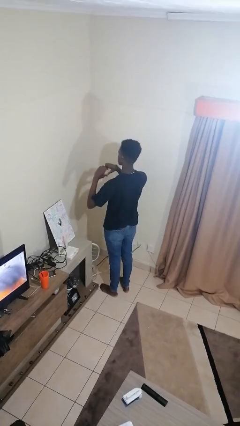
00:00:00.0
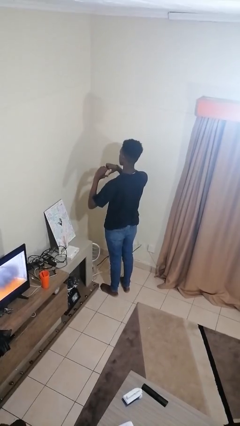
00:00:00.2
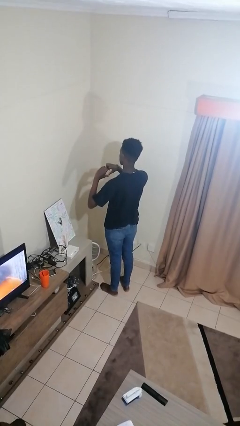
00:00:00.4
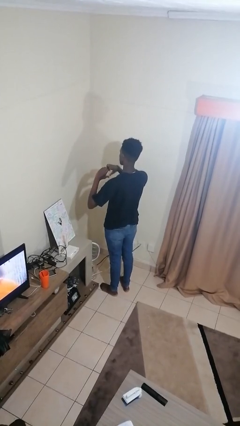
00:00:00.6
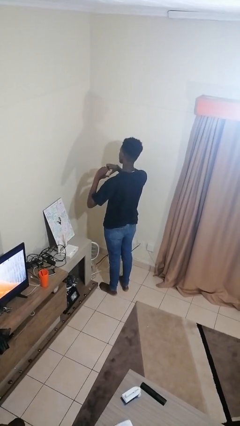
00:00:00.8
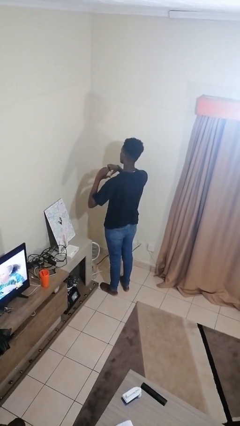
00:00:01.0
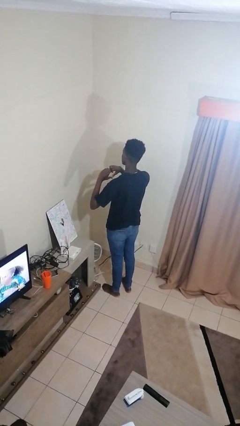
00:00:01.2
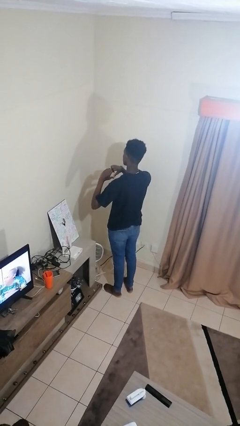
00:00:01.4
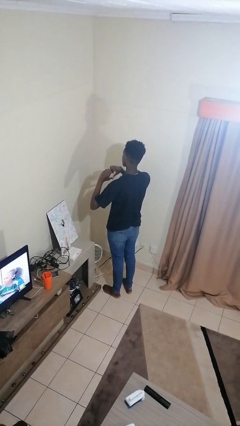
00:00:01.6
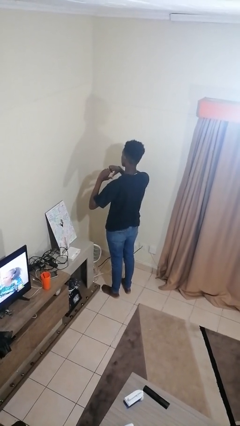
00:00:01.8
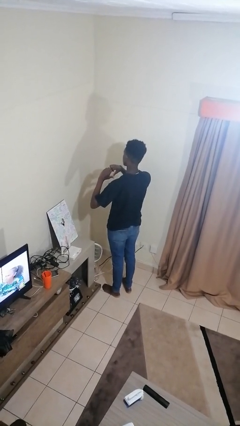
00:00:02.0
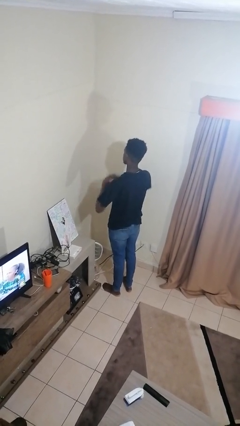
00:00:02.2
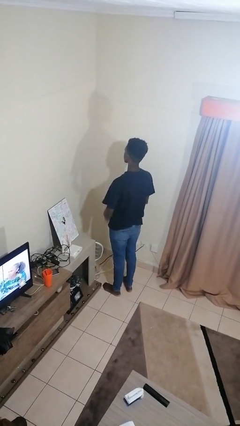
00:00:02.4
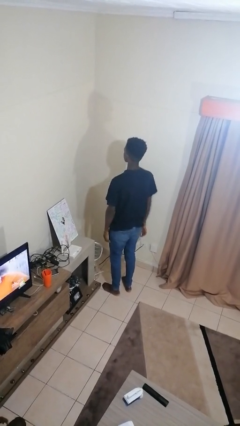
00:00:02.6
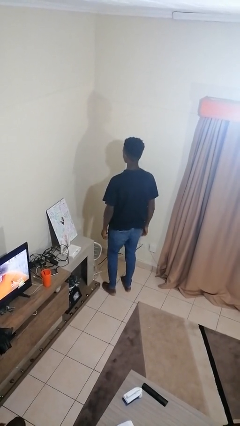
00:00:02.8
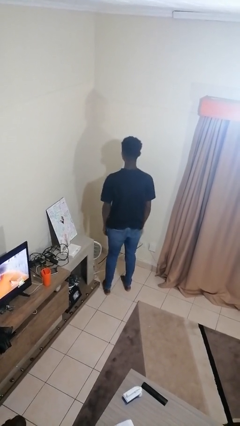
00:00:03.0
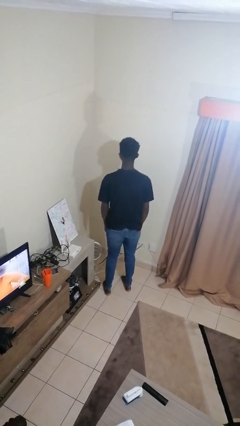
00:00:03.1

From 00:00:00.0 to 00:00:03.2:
person gestures heart

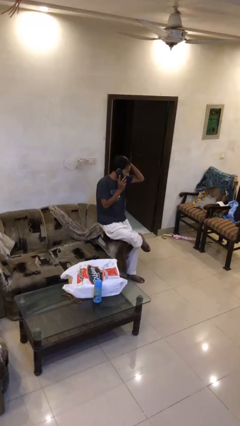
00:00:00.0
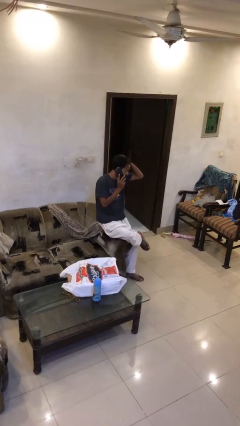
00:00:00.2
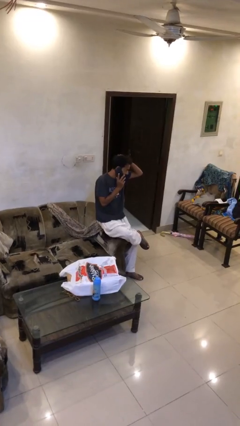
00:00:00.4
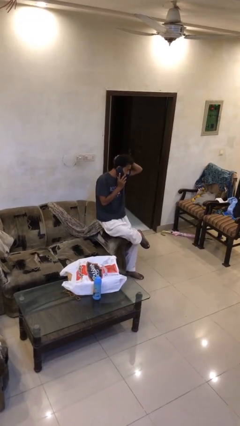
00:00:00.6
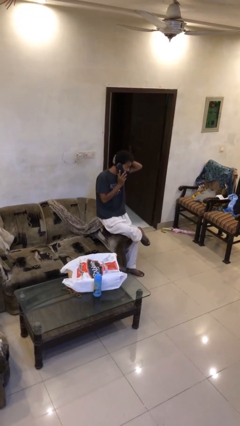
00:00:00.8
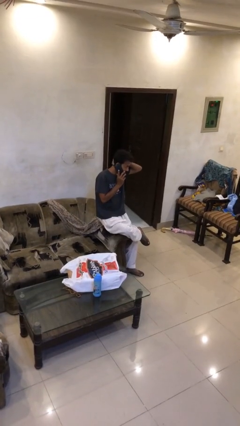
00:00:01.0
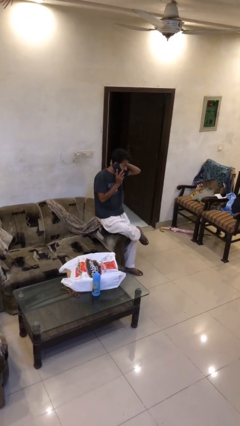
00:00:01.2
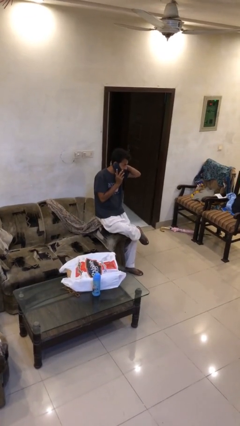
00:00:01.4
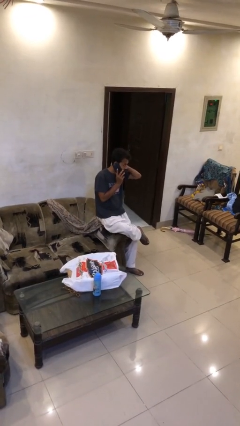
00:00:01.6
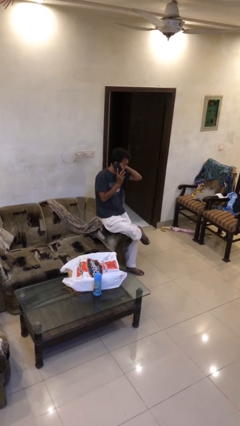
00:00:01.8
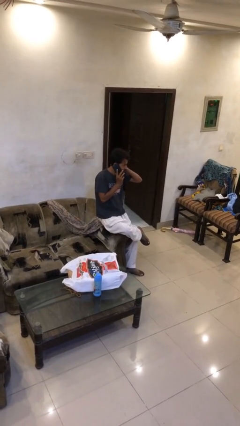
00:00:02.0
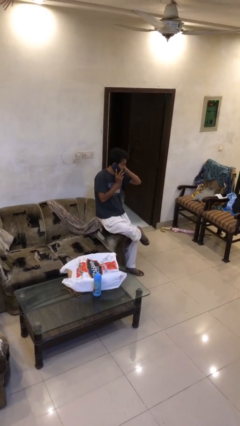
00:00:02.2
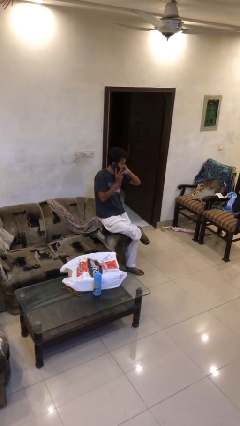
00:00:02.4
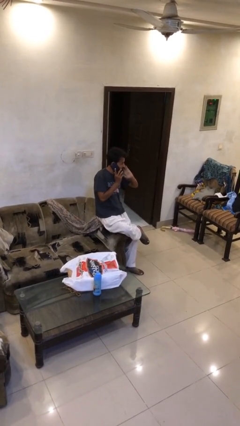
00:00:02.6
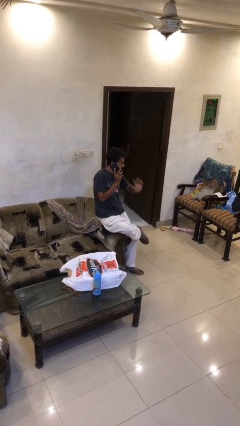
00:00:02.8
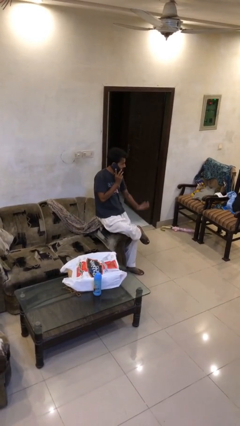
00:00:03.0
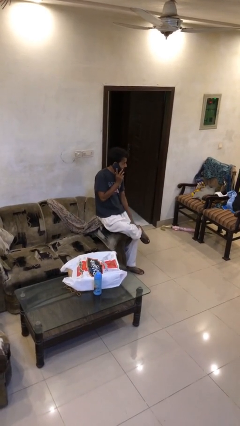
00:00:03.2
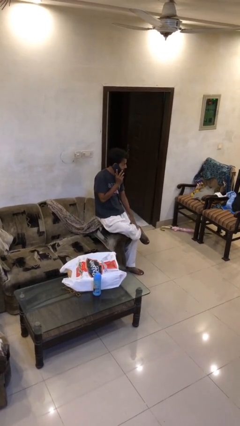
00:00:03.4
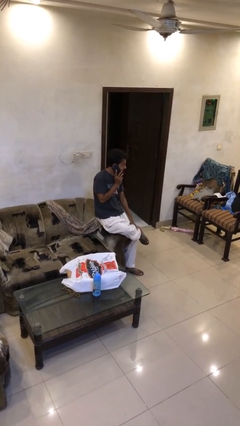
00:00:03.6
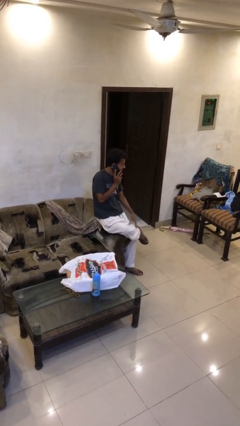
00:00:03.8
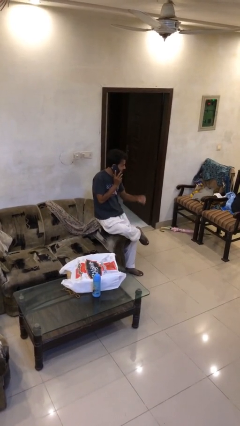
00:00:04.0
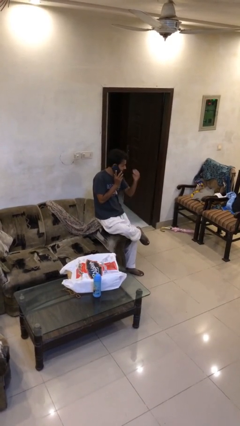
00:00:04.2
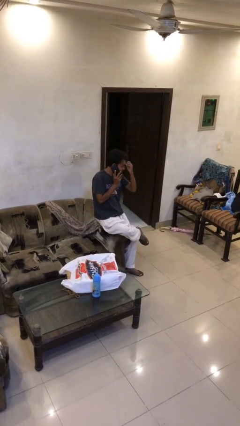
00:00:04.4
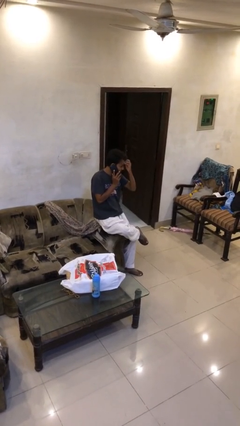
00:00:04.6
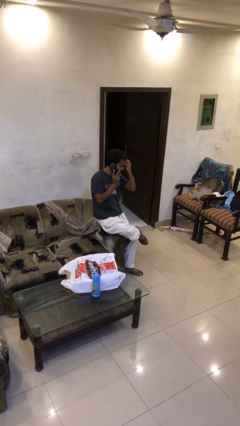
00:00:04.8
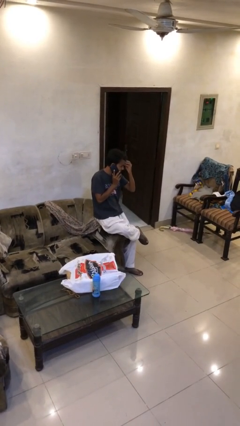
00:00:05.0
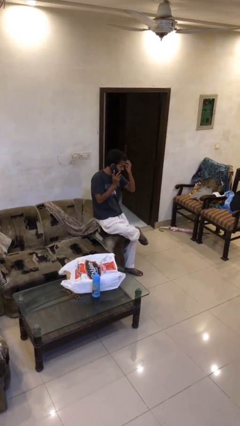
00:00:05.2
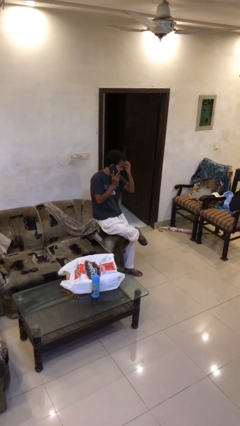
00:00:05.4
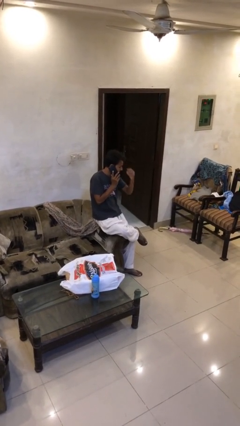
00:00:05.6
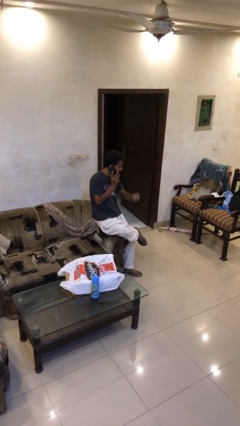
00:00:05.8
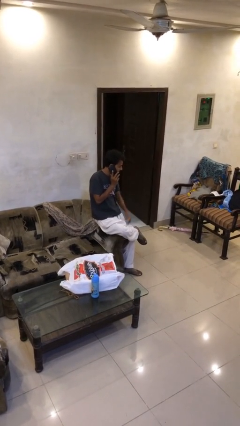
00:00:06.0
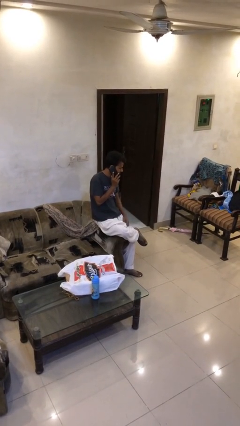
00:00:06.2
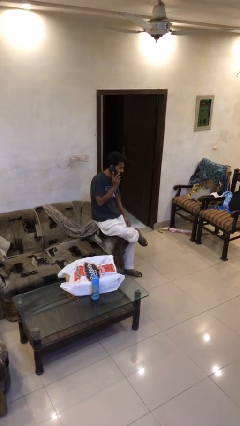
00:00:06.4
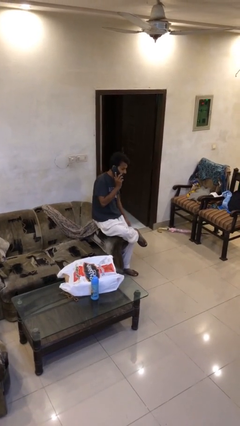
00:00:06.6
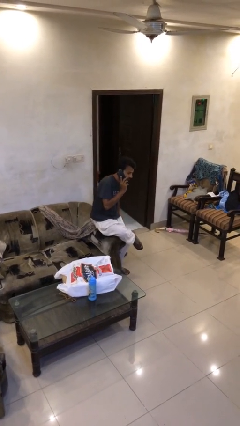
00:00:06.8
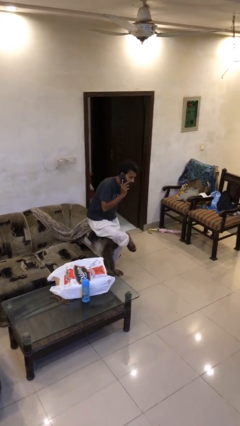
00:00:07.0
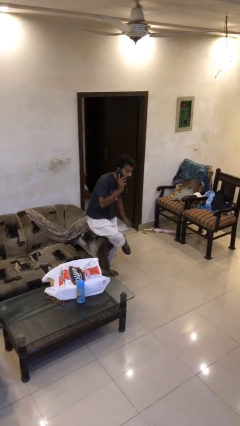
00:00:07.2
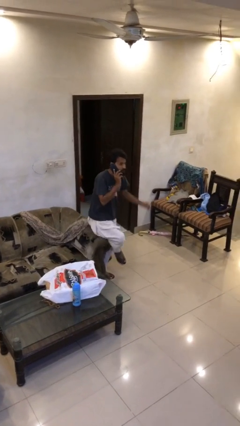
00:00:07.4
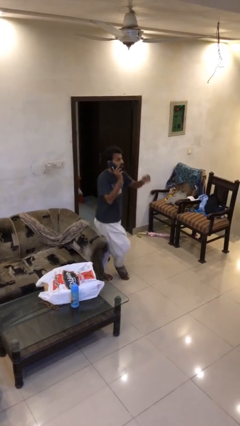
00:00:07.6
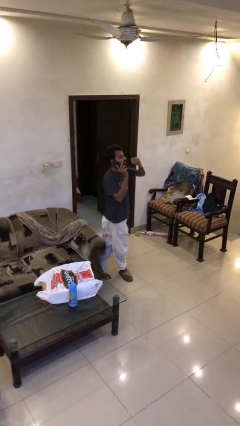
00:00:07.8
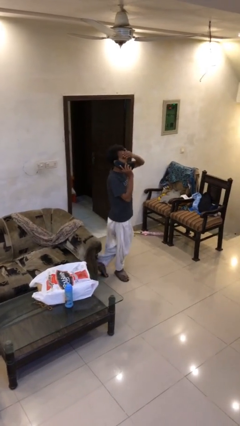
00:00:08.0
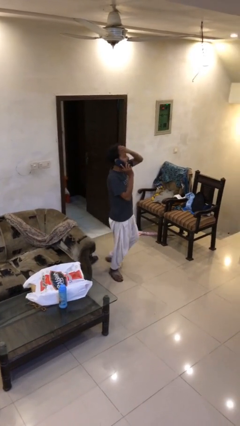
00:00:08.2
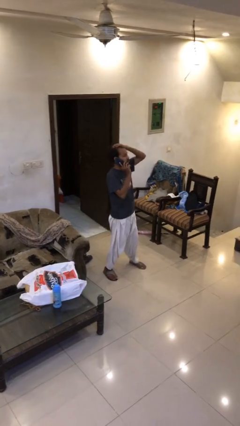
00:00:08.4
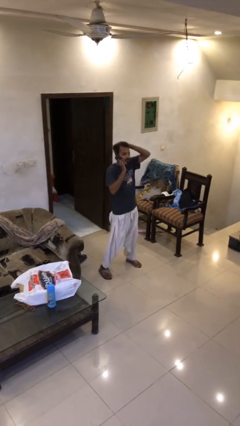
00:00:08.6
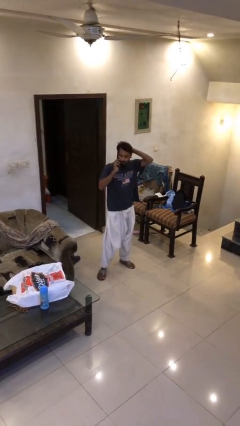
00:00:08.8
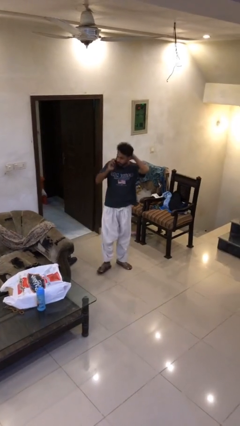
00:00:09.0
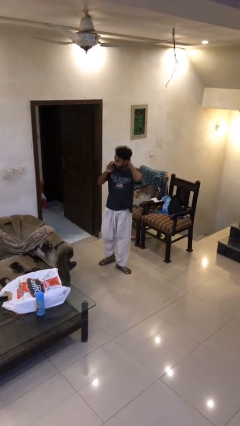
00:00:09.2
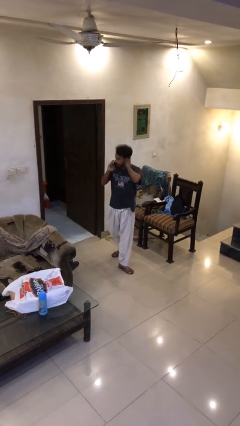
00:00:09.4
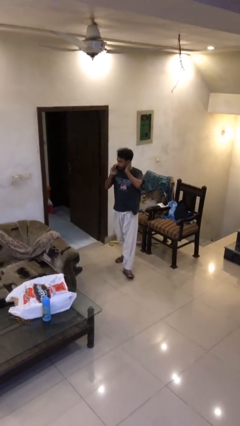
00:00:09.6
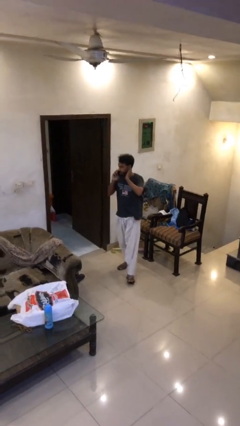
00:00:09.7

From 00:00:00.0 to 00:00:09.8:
person talks on phone

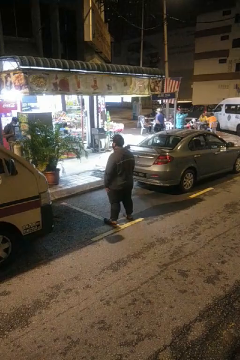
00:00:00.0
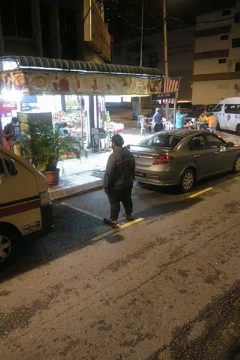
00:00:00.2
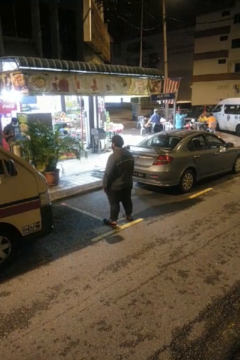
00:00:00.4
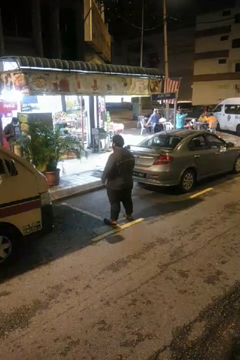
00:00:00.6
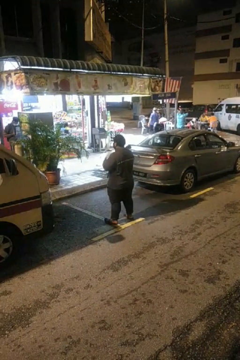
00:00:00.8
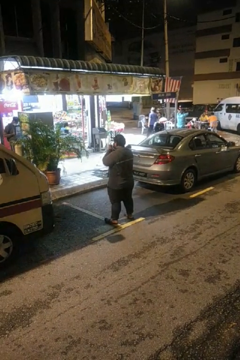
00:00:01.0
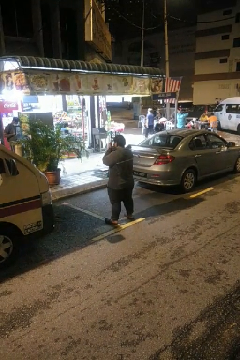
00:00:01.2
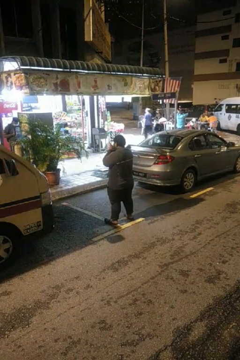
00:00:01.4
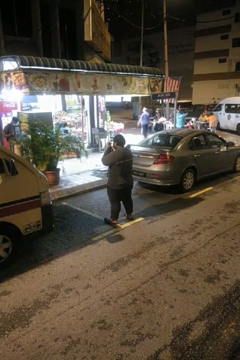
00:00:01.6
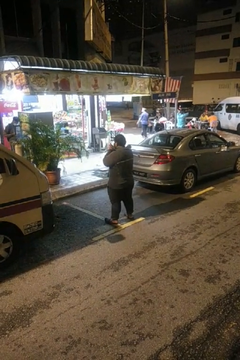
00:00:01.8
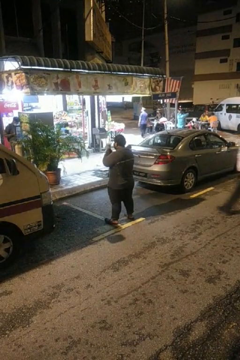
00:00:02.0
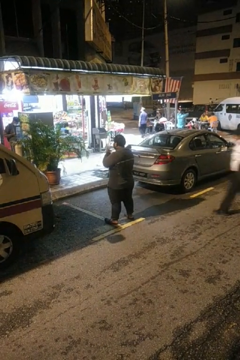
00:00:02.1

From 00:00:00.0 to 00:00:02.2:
person blows into hands

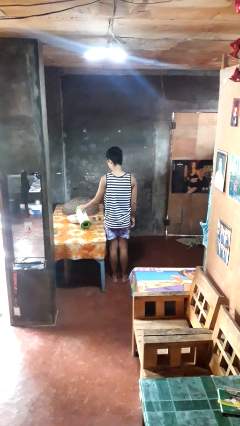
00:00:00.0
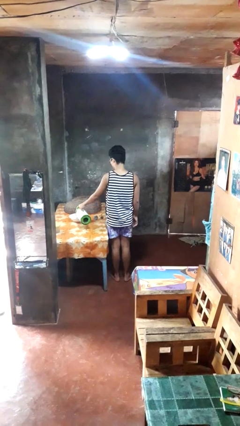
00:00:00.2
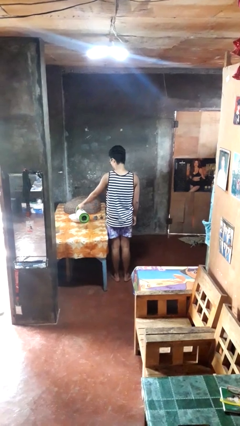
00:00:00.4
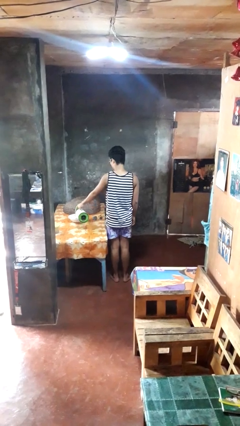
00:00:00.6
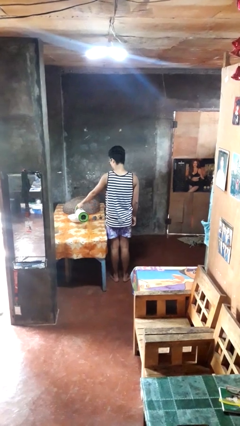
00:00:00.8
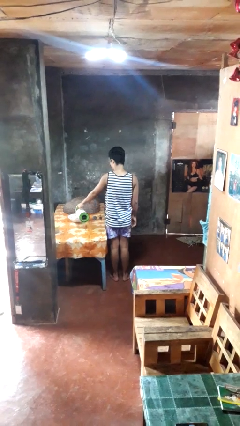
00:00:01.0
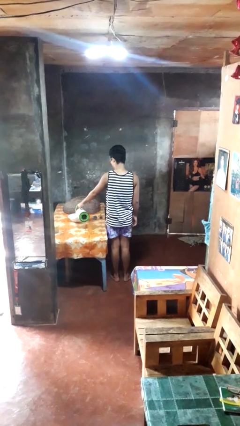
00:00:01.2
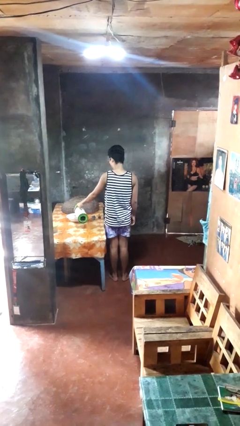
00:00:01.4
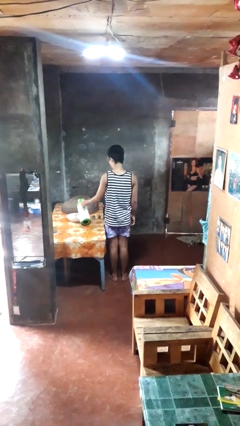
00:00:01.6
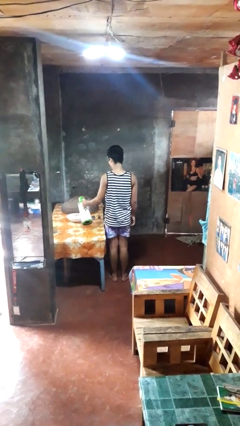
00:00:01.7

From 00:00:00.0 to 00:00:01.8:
person pours into bowl

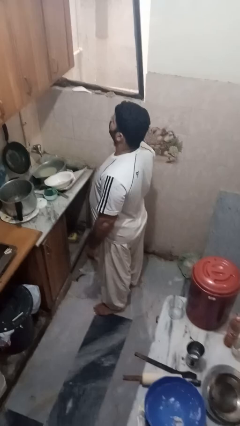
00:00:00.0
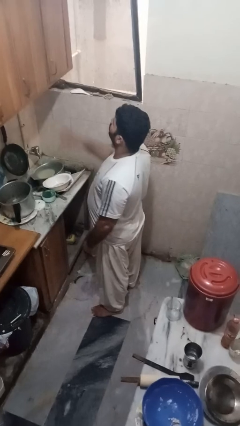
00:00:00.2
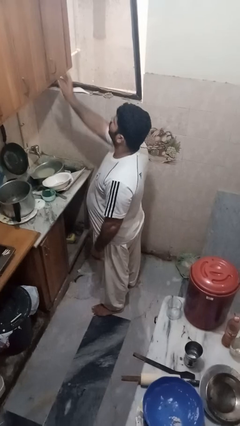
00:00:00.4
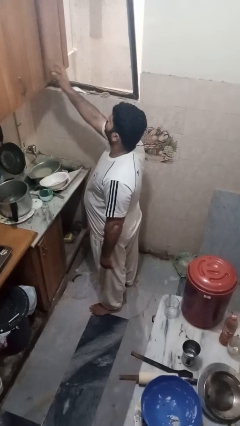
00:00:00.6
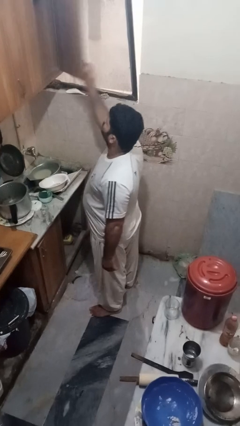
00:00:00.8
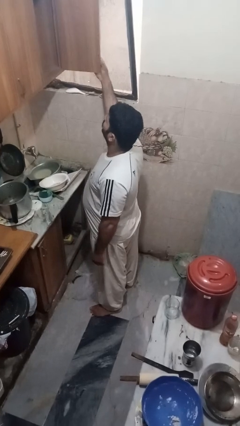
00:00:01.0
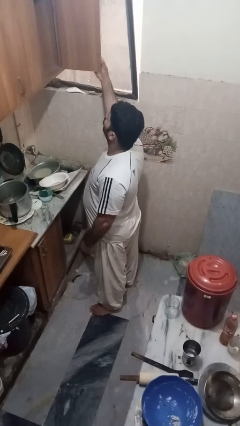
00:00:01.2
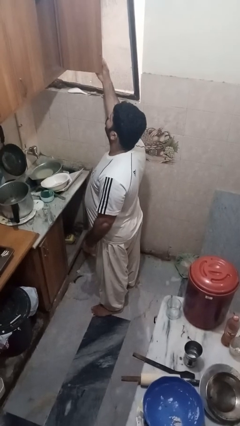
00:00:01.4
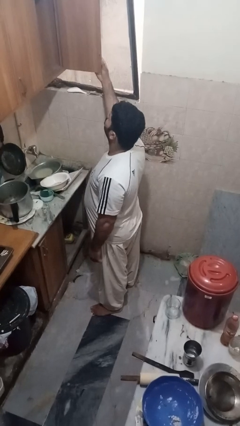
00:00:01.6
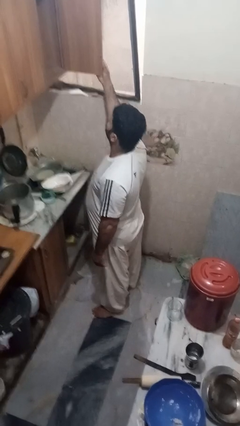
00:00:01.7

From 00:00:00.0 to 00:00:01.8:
person opens cabinet
